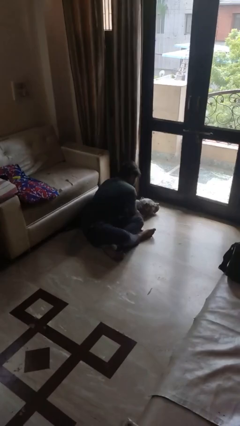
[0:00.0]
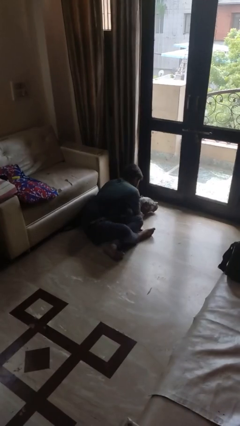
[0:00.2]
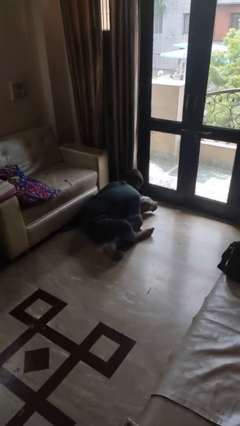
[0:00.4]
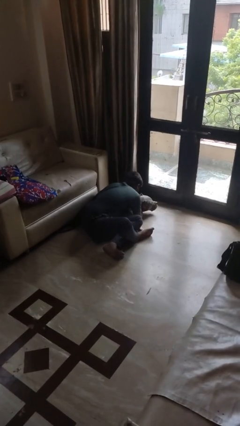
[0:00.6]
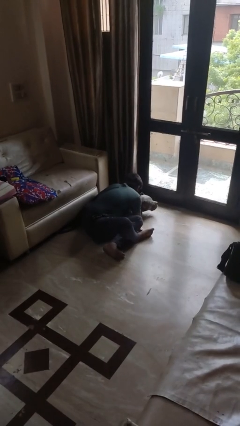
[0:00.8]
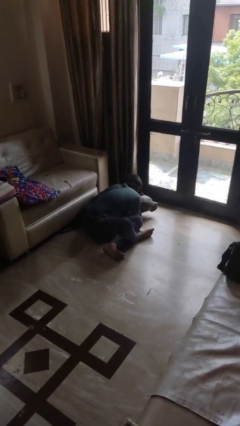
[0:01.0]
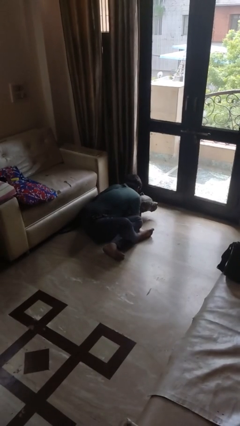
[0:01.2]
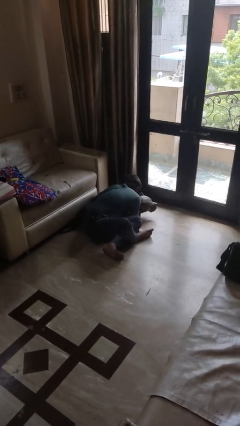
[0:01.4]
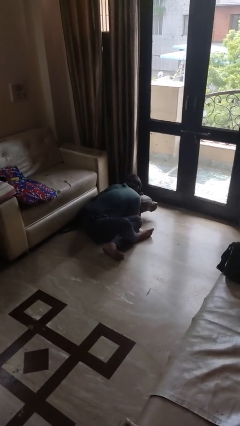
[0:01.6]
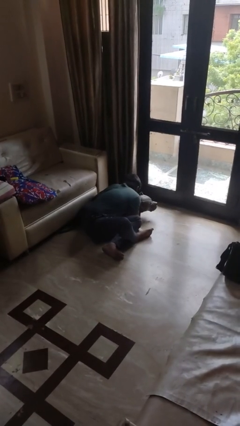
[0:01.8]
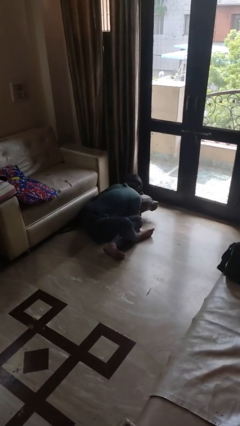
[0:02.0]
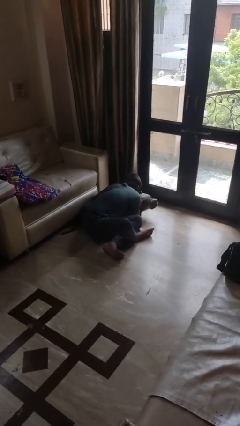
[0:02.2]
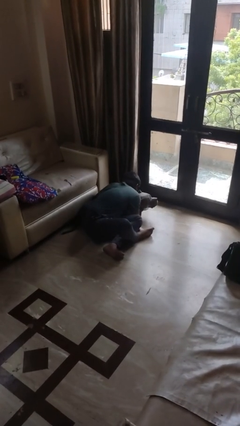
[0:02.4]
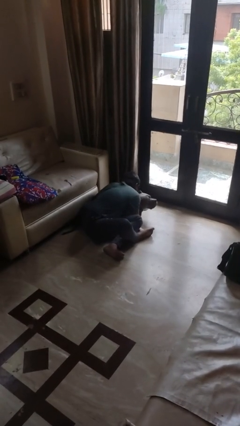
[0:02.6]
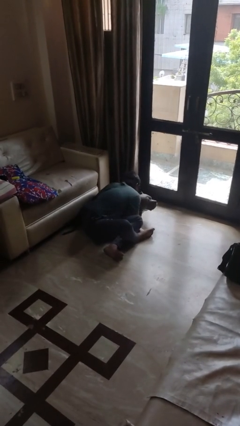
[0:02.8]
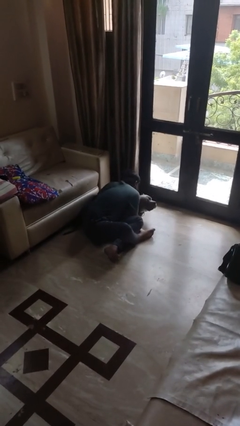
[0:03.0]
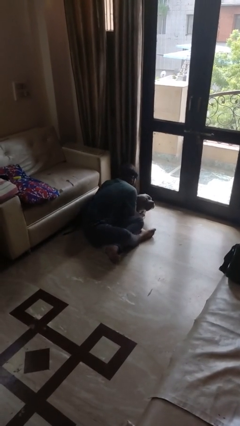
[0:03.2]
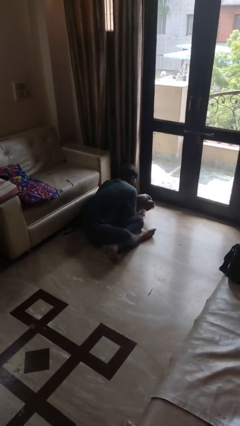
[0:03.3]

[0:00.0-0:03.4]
person hugs dog

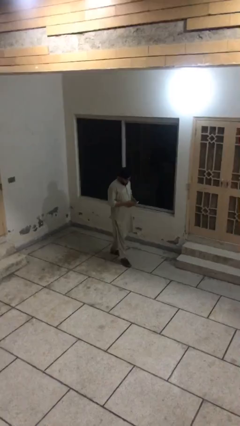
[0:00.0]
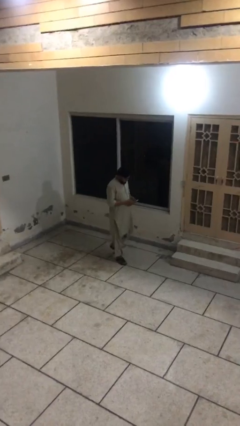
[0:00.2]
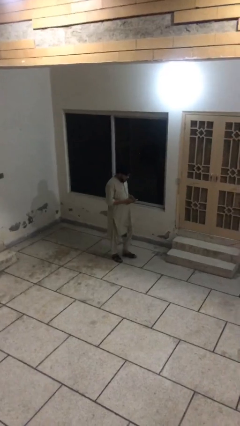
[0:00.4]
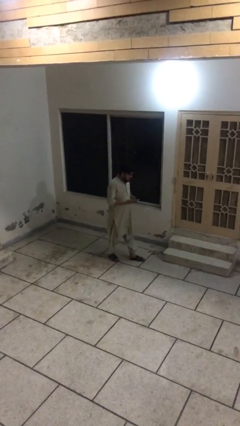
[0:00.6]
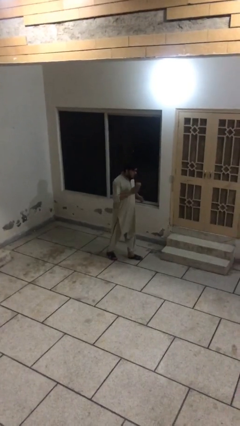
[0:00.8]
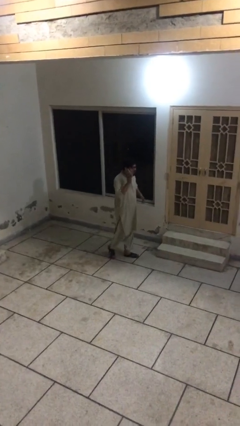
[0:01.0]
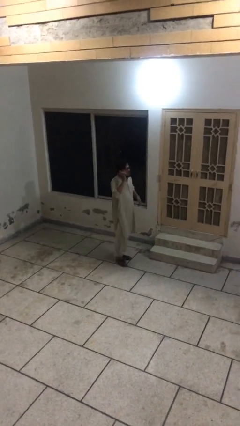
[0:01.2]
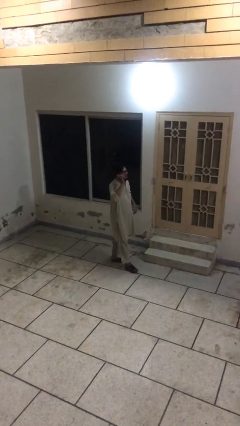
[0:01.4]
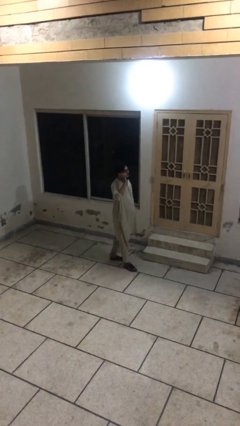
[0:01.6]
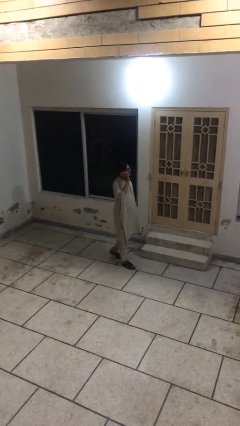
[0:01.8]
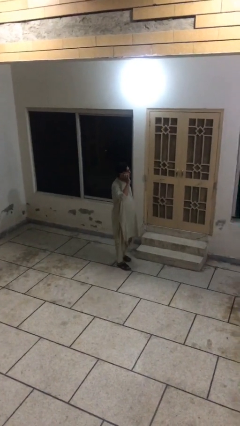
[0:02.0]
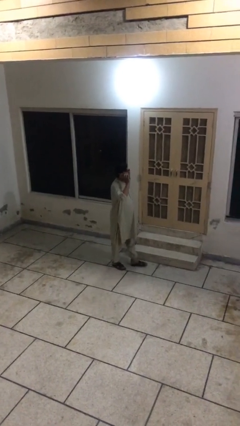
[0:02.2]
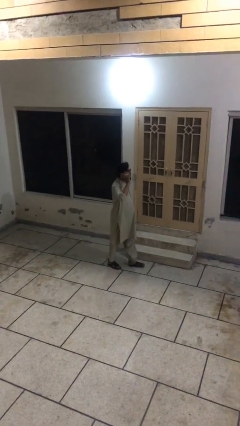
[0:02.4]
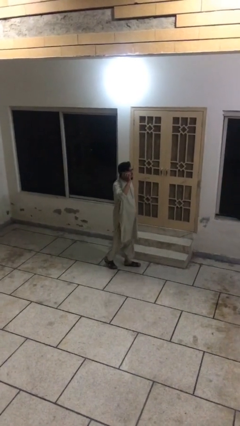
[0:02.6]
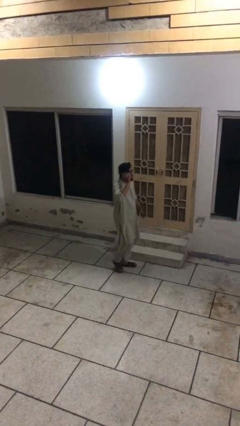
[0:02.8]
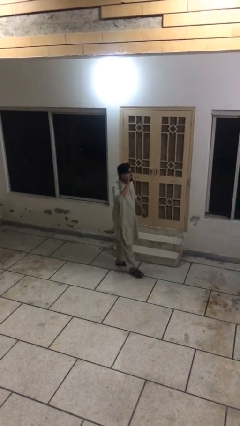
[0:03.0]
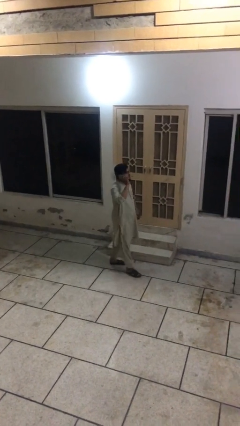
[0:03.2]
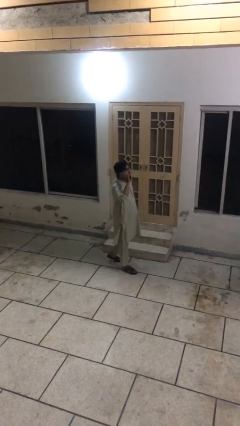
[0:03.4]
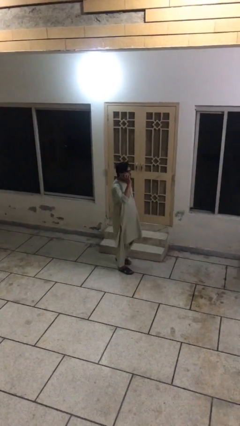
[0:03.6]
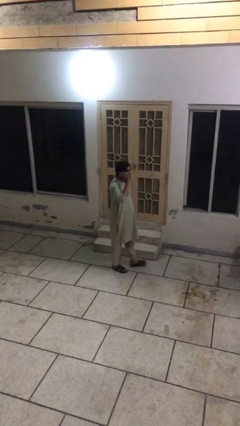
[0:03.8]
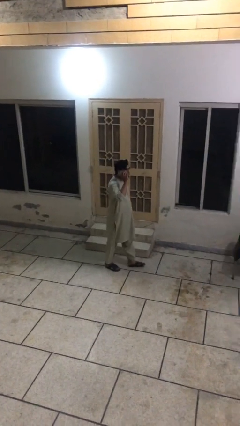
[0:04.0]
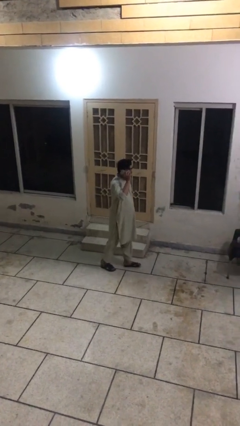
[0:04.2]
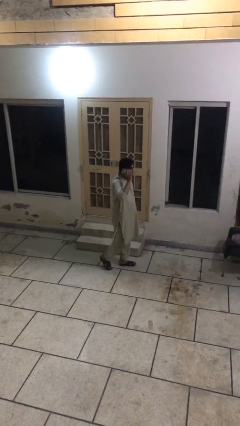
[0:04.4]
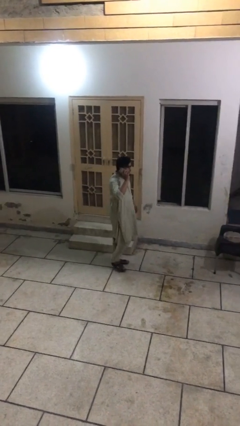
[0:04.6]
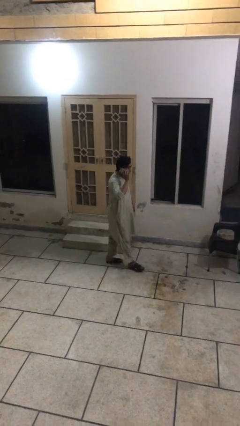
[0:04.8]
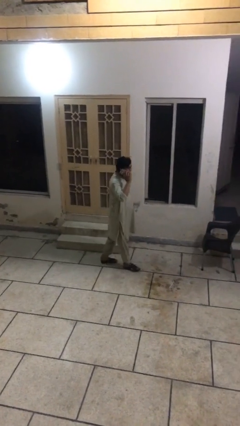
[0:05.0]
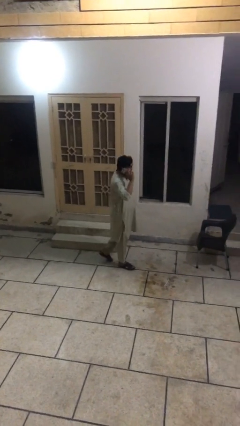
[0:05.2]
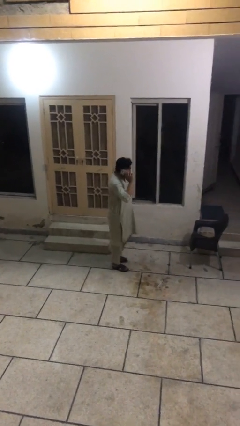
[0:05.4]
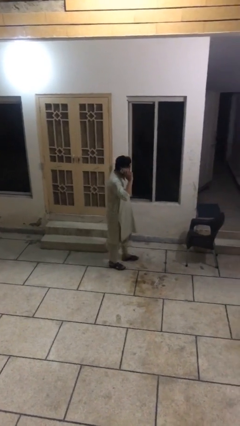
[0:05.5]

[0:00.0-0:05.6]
person talks on phone

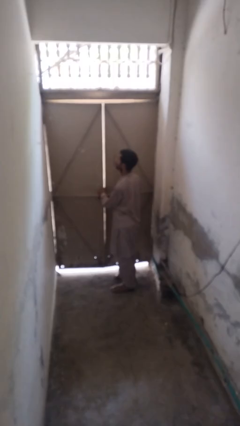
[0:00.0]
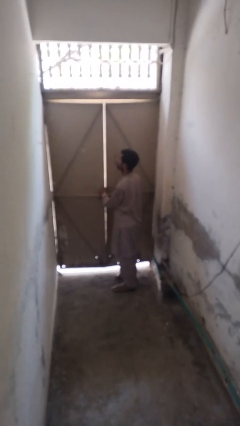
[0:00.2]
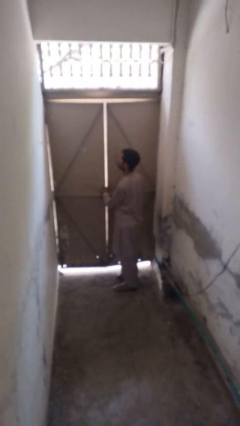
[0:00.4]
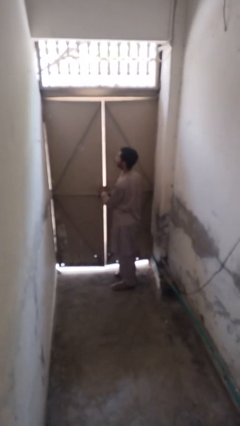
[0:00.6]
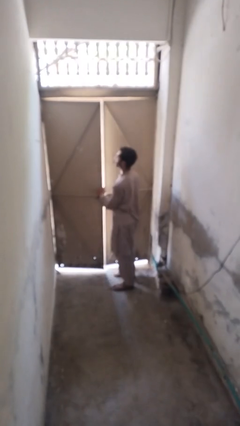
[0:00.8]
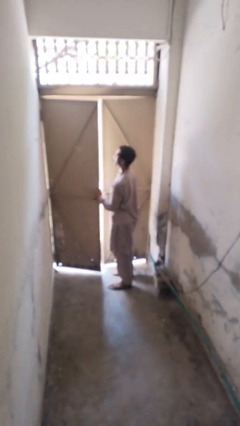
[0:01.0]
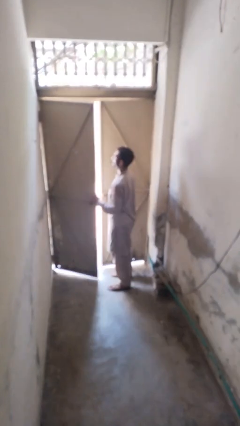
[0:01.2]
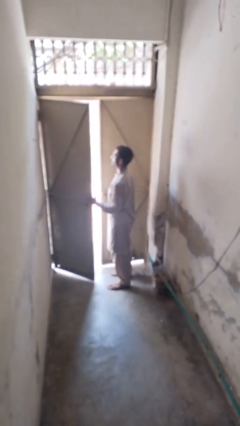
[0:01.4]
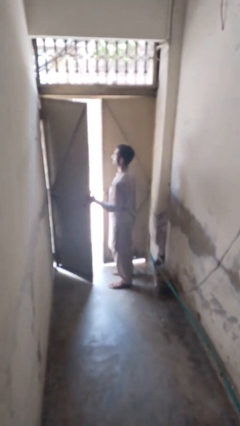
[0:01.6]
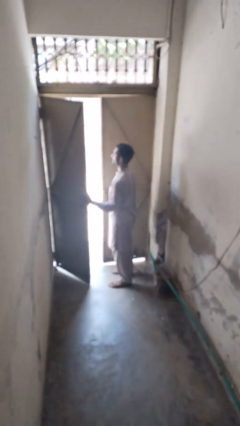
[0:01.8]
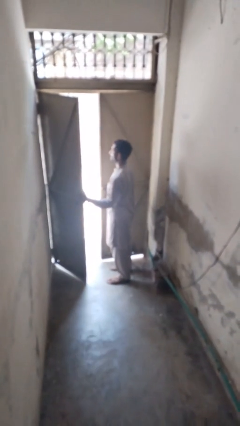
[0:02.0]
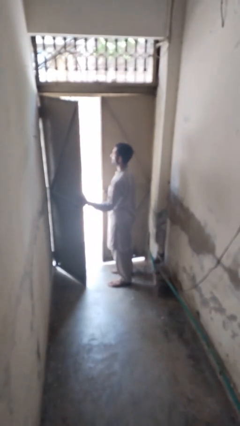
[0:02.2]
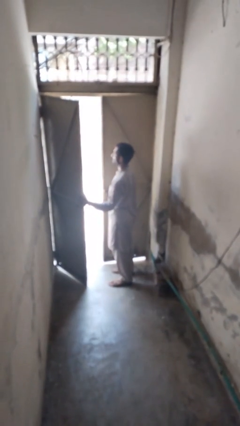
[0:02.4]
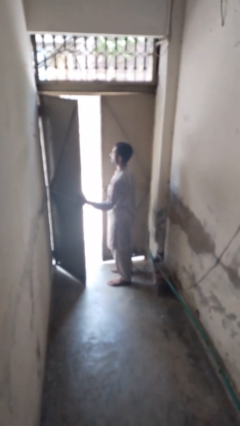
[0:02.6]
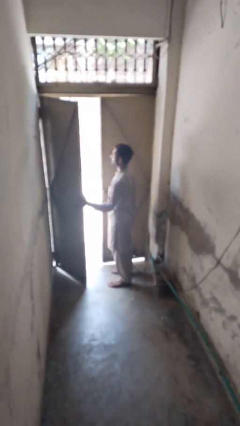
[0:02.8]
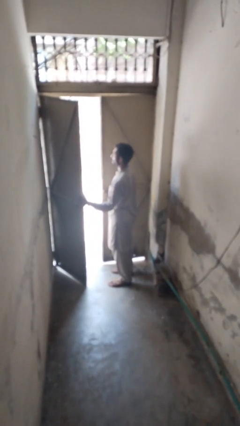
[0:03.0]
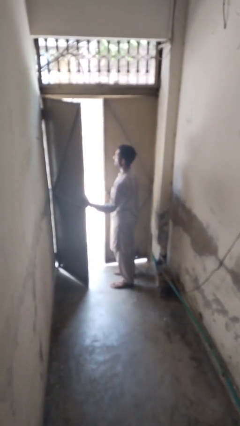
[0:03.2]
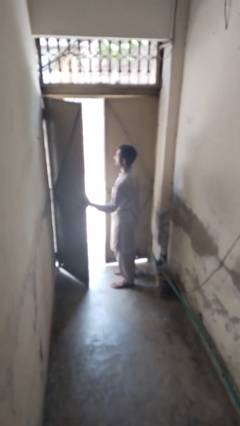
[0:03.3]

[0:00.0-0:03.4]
person opens gate

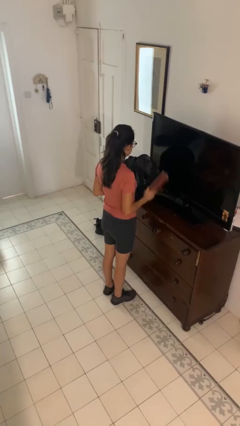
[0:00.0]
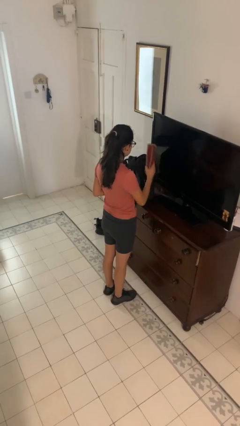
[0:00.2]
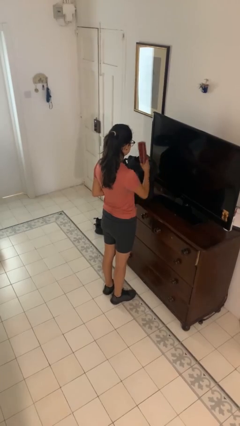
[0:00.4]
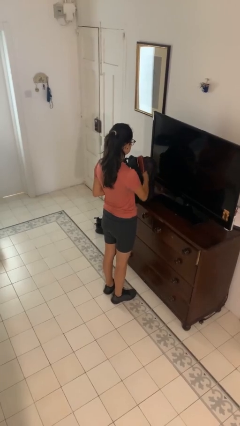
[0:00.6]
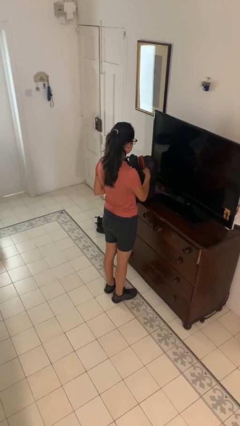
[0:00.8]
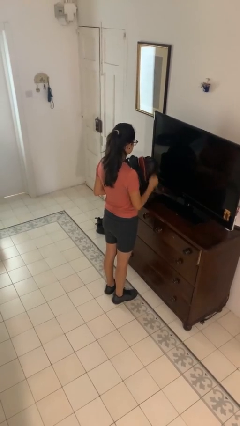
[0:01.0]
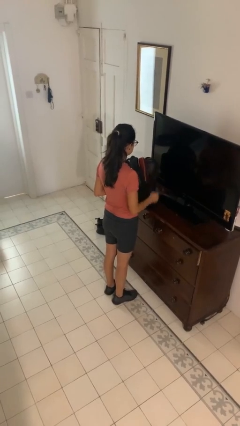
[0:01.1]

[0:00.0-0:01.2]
person puts object into bag

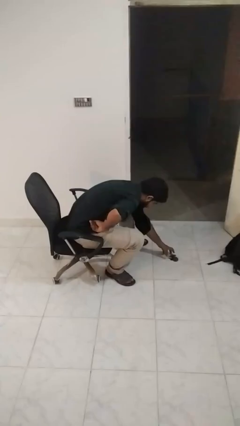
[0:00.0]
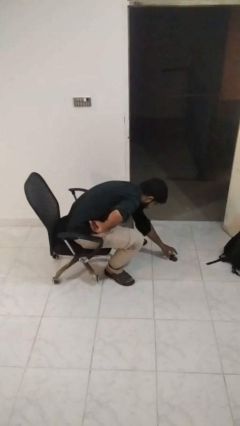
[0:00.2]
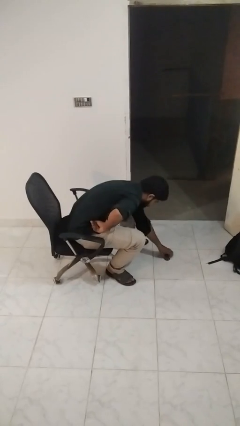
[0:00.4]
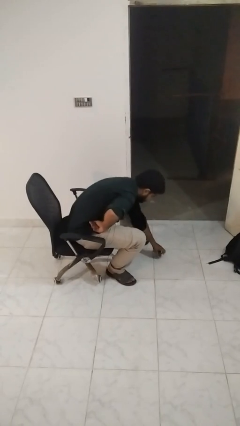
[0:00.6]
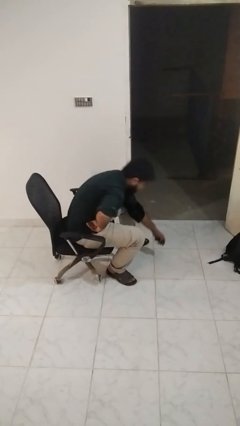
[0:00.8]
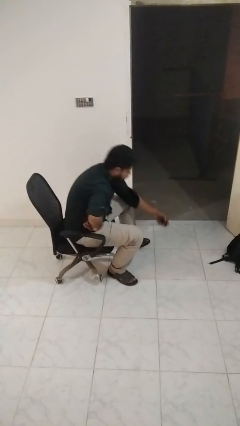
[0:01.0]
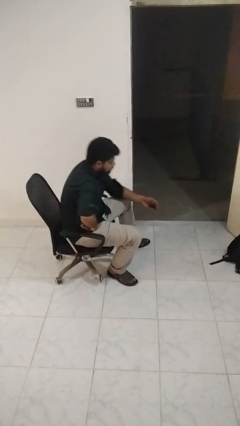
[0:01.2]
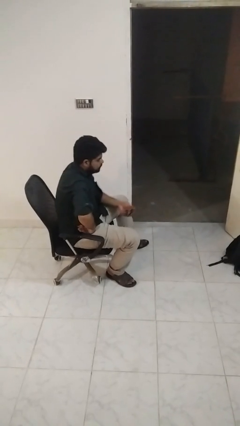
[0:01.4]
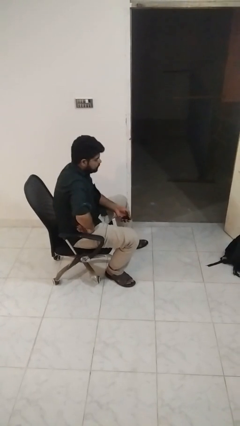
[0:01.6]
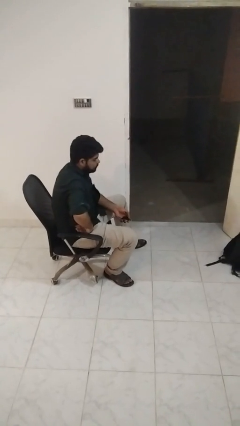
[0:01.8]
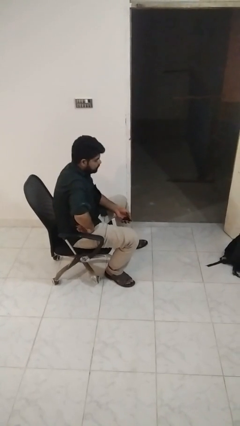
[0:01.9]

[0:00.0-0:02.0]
person picks up object from floor

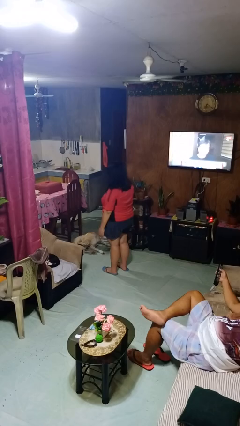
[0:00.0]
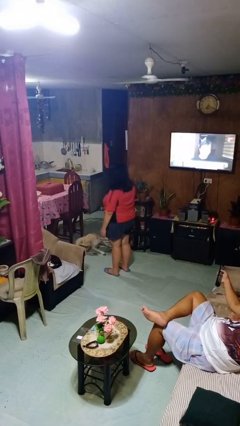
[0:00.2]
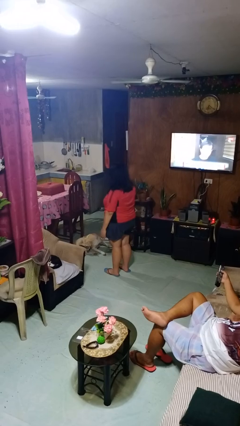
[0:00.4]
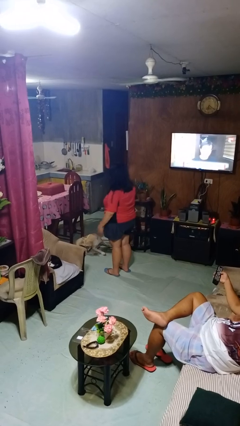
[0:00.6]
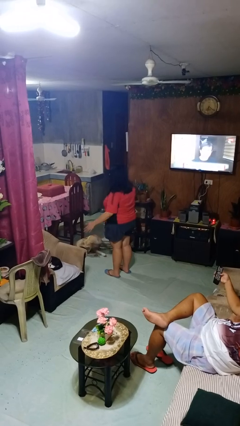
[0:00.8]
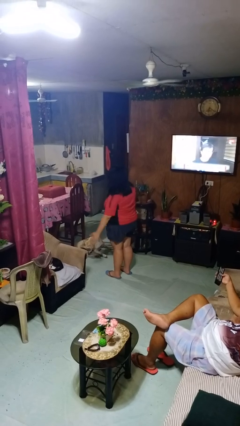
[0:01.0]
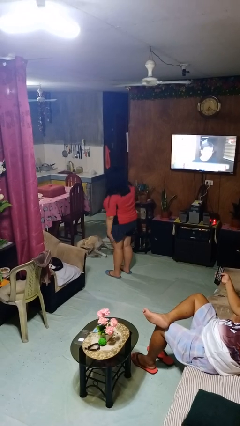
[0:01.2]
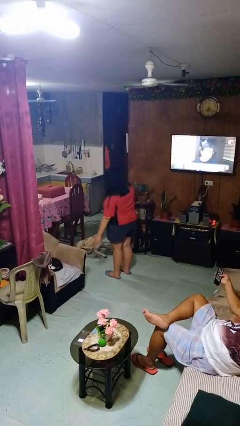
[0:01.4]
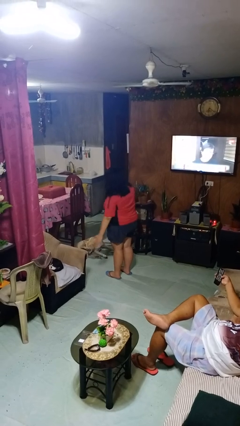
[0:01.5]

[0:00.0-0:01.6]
person slaps hands on thighs
